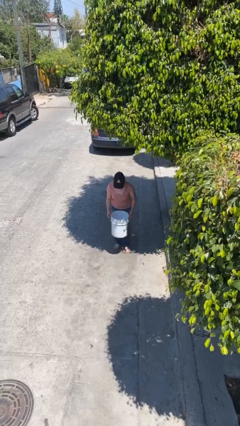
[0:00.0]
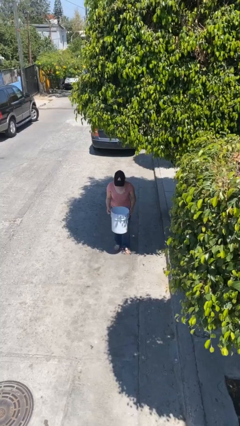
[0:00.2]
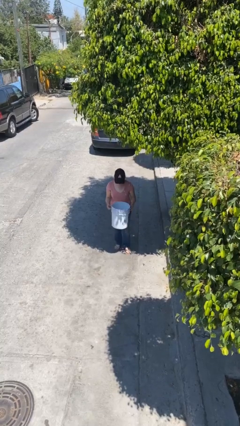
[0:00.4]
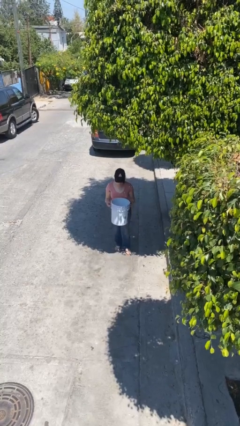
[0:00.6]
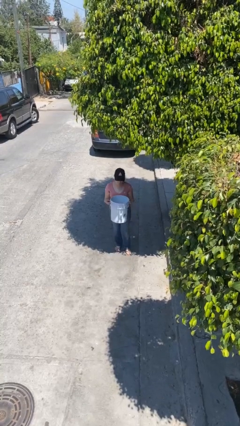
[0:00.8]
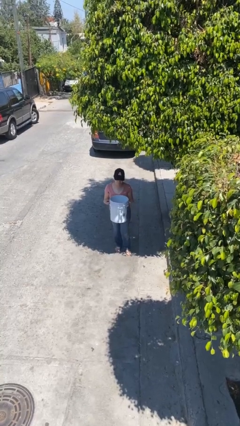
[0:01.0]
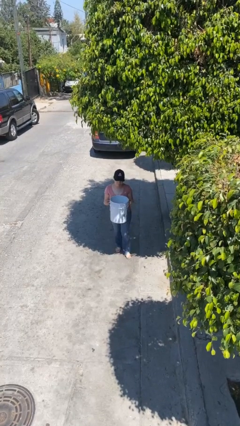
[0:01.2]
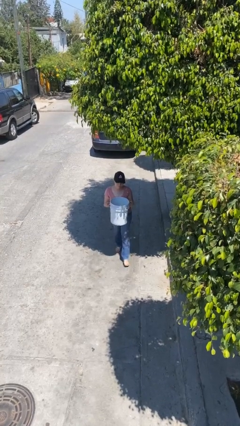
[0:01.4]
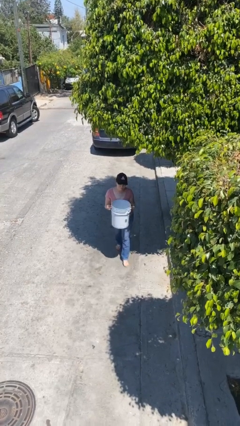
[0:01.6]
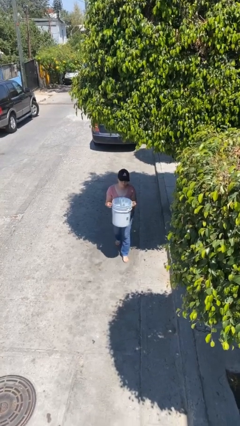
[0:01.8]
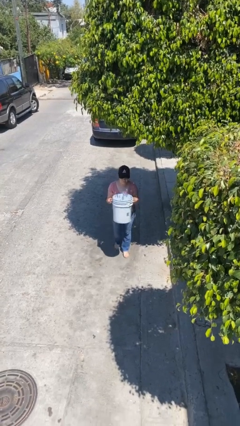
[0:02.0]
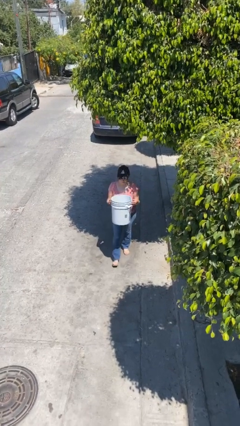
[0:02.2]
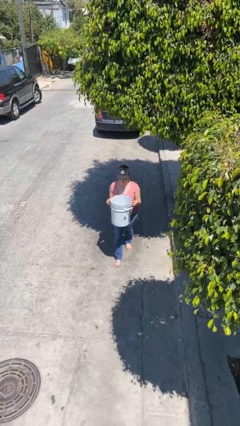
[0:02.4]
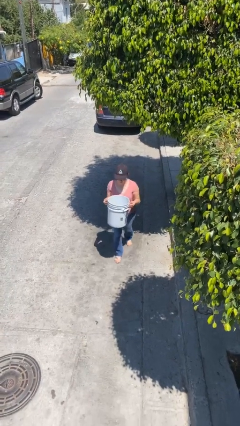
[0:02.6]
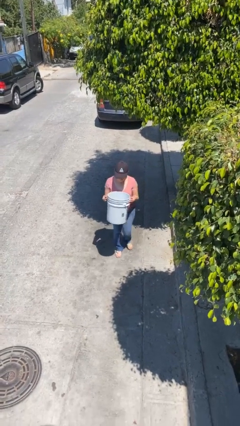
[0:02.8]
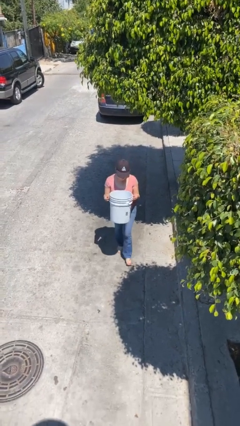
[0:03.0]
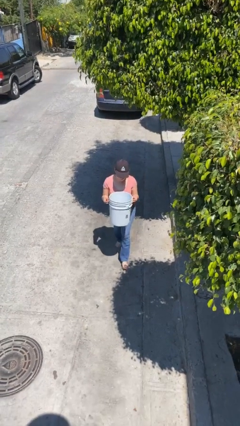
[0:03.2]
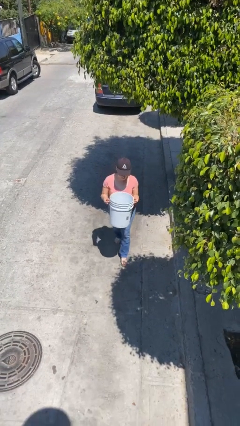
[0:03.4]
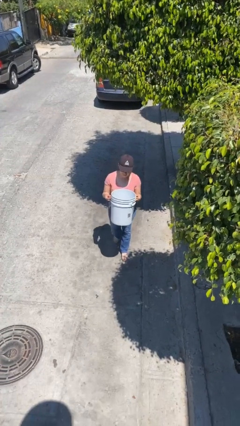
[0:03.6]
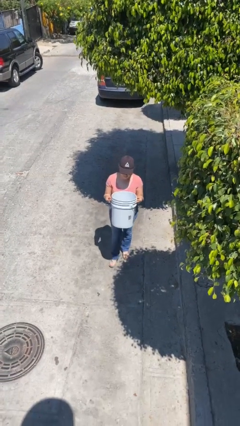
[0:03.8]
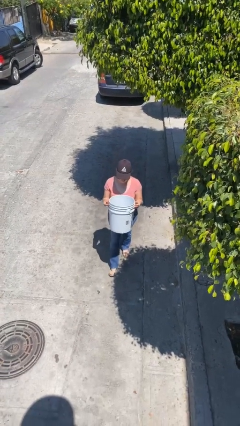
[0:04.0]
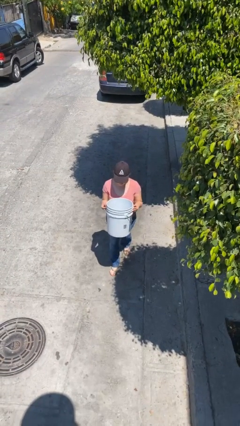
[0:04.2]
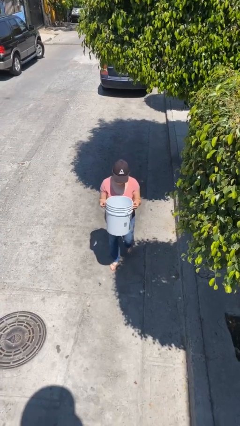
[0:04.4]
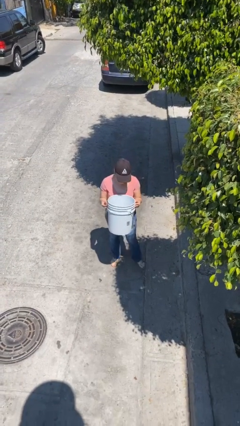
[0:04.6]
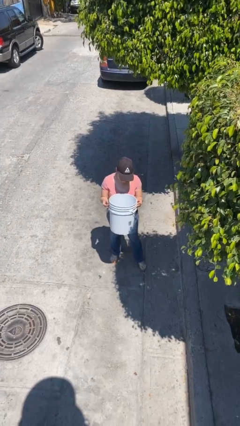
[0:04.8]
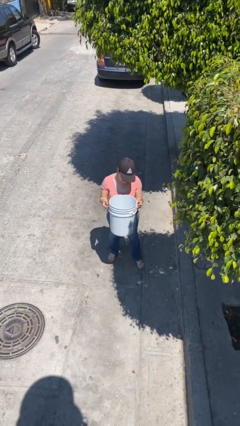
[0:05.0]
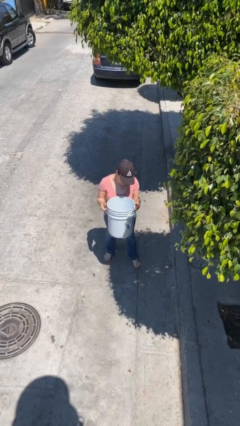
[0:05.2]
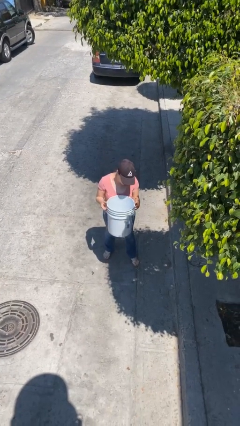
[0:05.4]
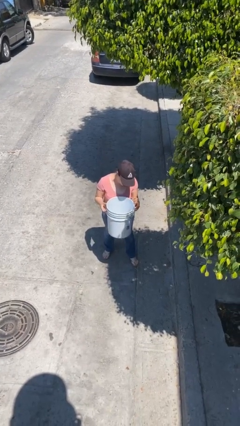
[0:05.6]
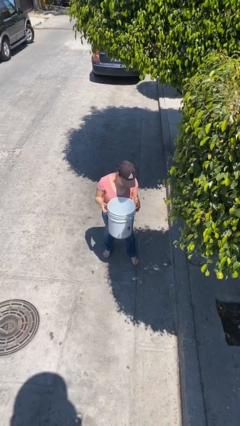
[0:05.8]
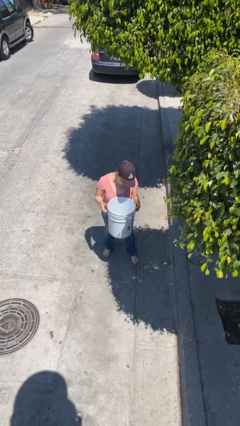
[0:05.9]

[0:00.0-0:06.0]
person carries heavy object

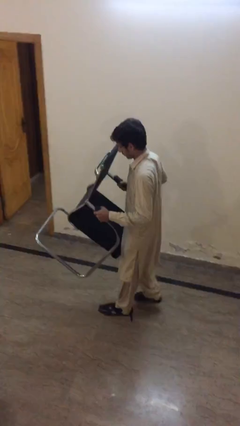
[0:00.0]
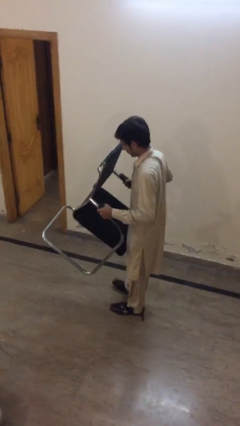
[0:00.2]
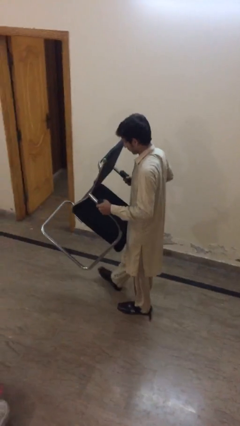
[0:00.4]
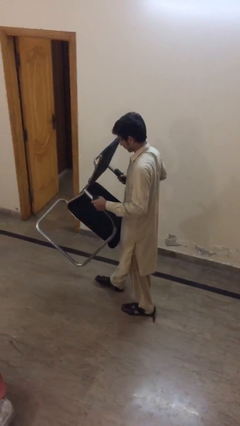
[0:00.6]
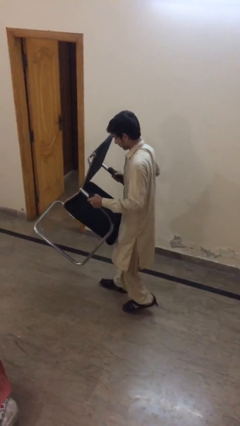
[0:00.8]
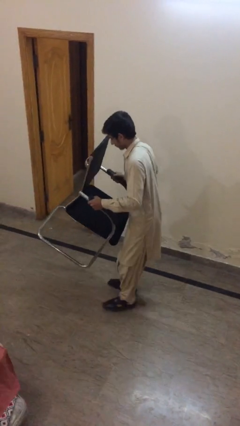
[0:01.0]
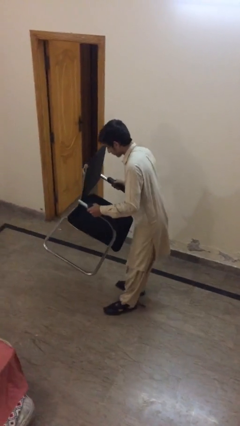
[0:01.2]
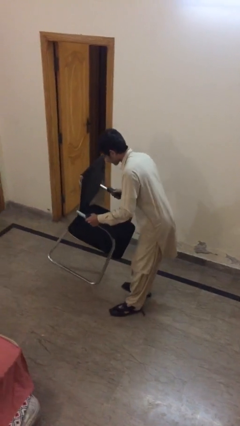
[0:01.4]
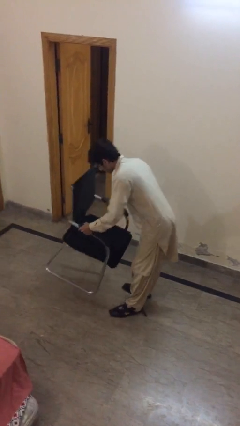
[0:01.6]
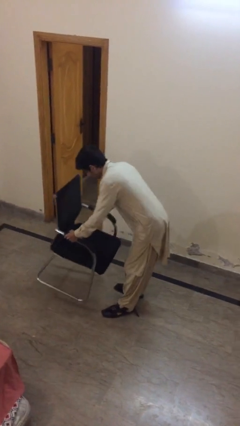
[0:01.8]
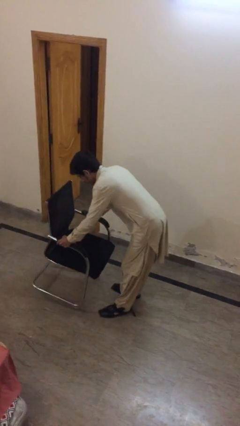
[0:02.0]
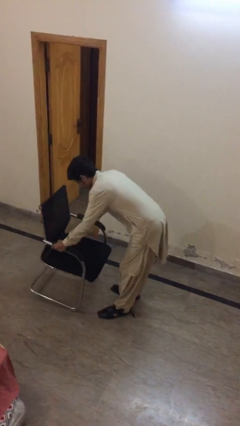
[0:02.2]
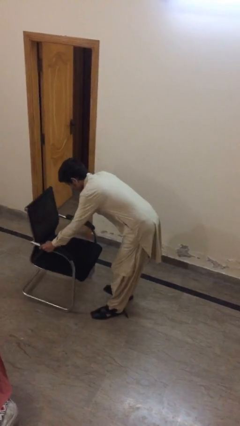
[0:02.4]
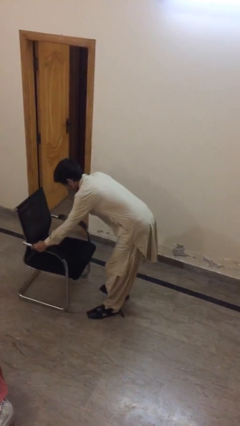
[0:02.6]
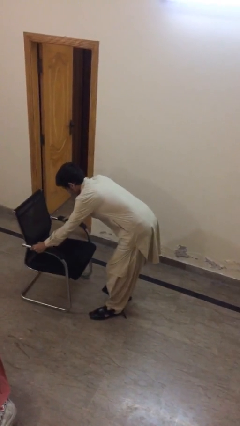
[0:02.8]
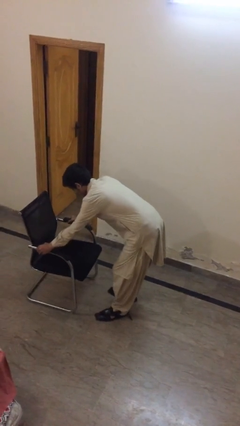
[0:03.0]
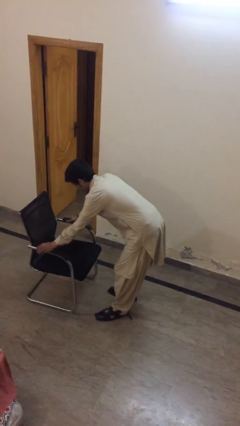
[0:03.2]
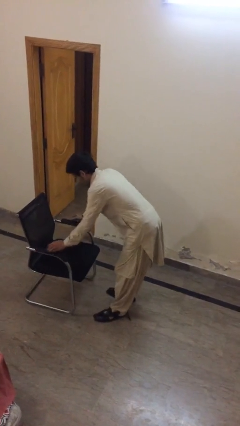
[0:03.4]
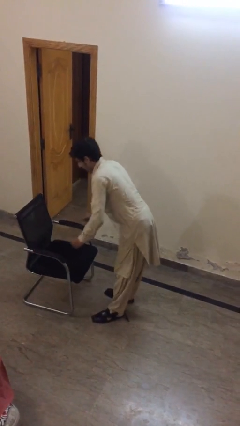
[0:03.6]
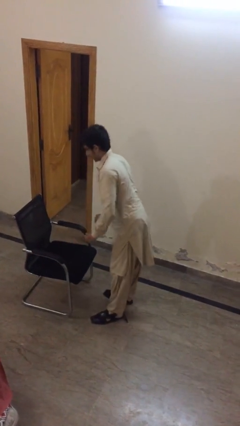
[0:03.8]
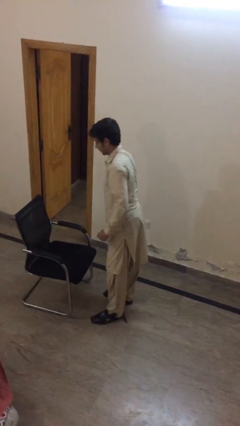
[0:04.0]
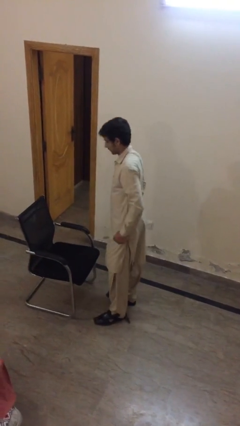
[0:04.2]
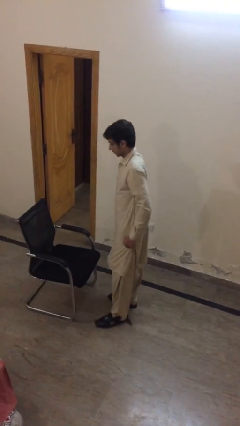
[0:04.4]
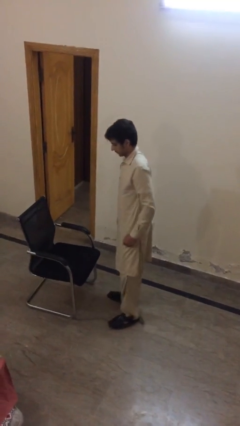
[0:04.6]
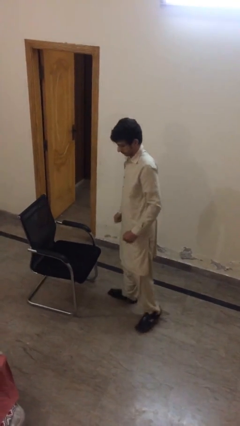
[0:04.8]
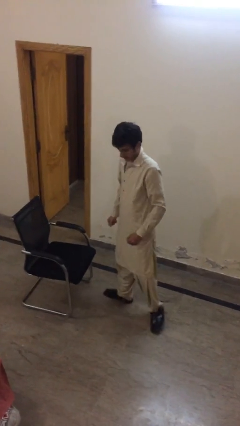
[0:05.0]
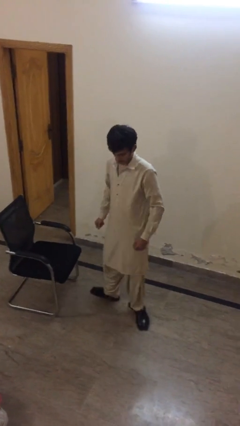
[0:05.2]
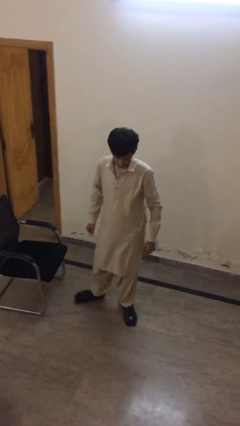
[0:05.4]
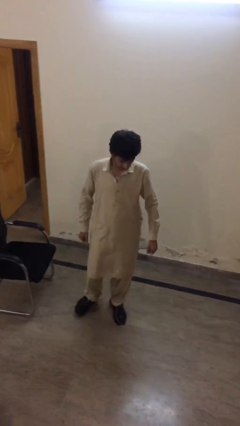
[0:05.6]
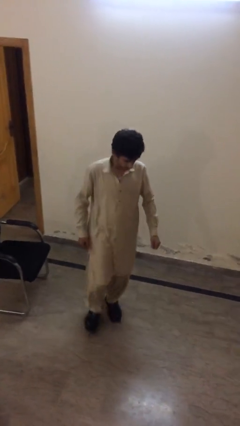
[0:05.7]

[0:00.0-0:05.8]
person puts down object on floor

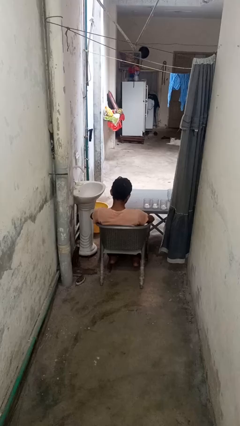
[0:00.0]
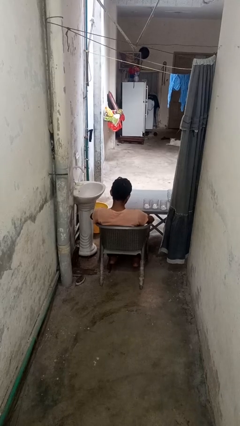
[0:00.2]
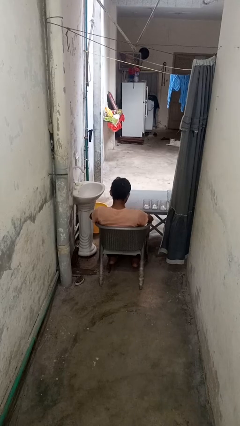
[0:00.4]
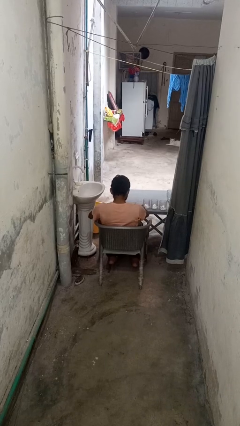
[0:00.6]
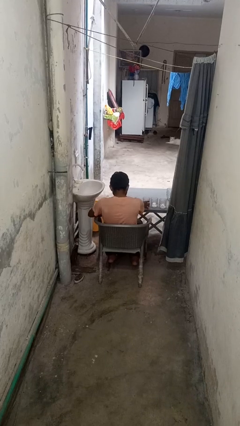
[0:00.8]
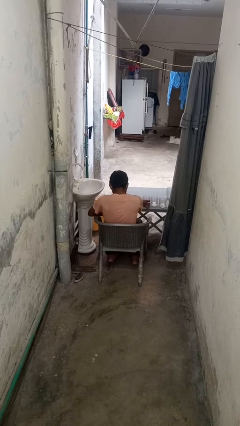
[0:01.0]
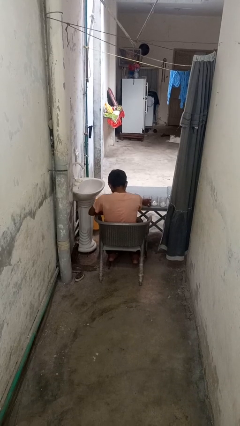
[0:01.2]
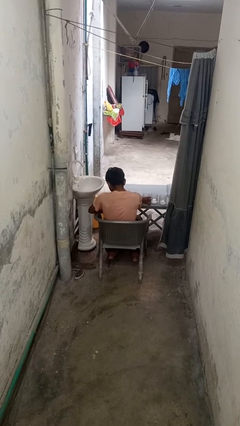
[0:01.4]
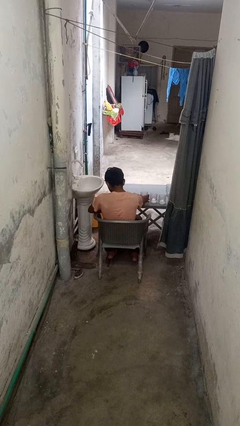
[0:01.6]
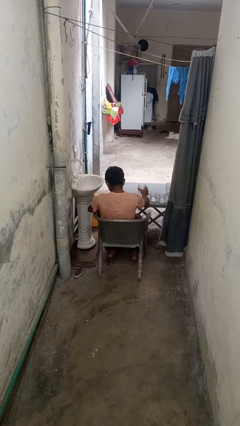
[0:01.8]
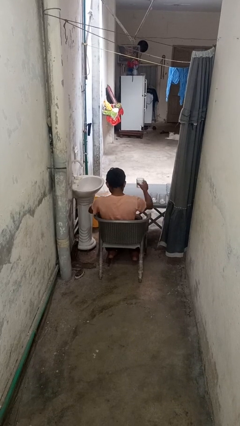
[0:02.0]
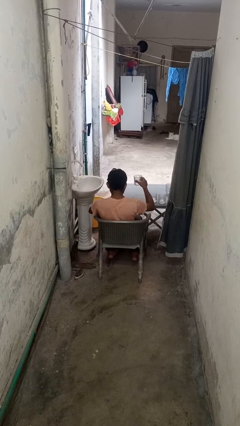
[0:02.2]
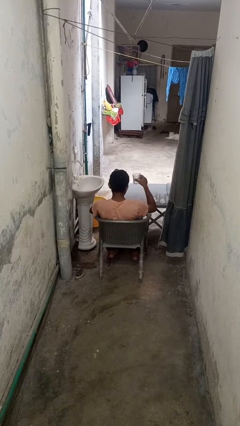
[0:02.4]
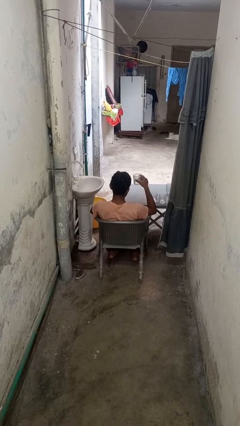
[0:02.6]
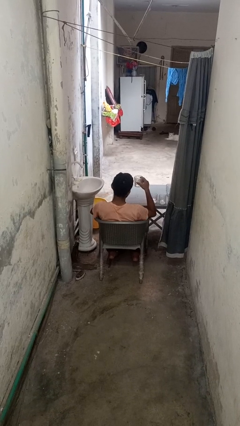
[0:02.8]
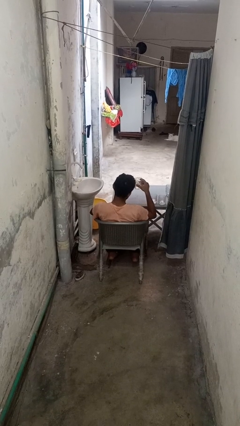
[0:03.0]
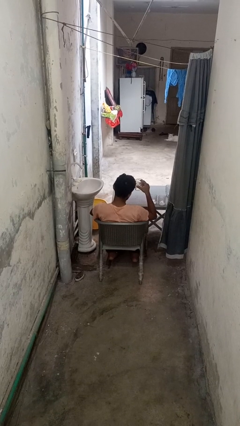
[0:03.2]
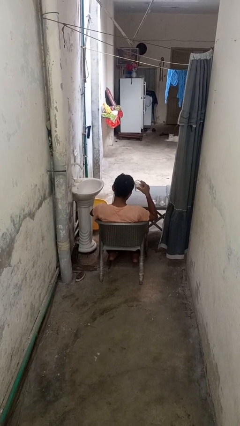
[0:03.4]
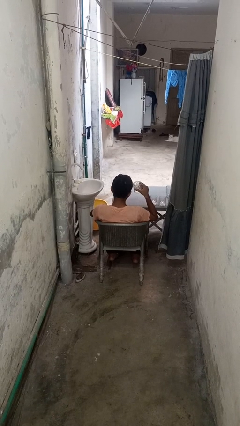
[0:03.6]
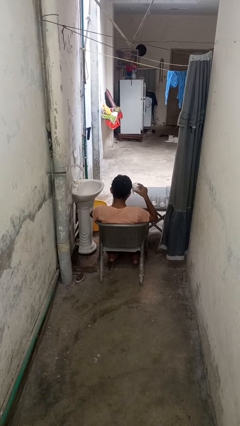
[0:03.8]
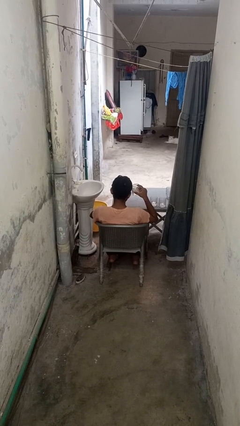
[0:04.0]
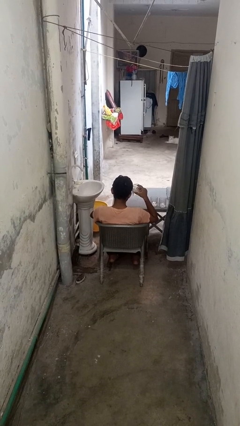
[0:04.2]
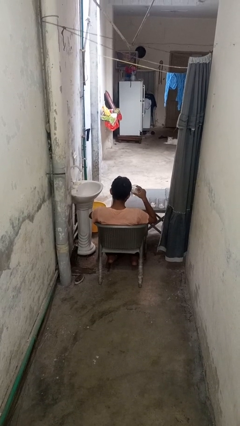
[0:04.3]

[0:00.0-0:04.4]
person picks up object from table

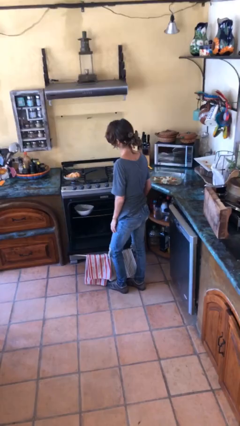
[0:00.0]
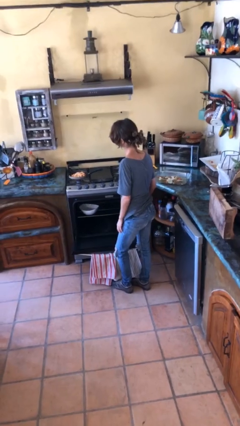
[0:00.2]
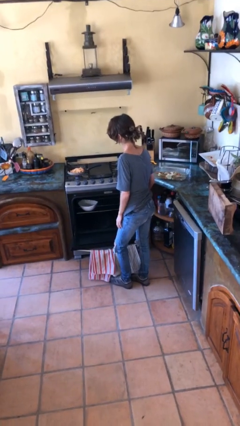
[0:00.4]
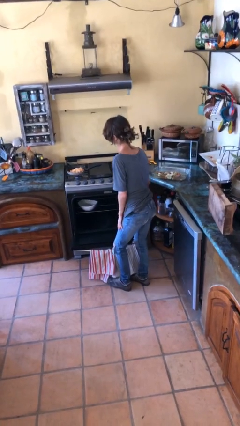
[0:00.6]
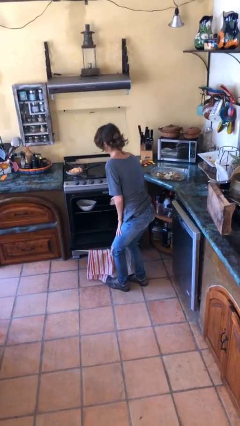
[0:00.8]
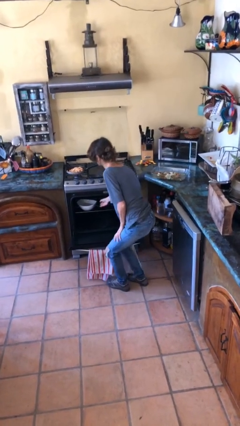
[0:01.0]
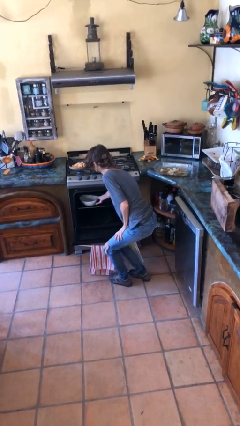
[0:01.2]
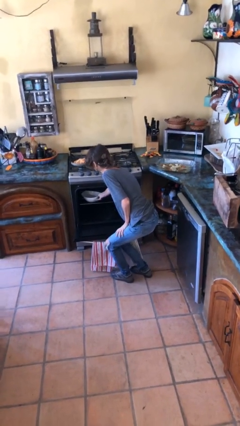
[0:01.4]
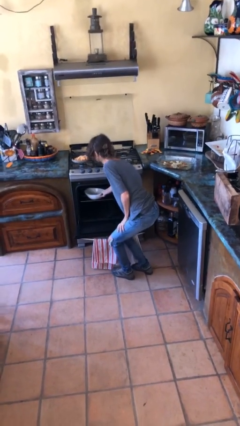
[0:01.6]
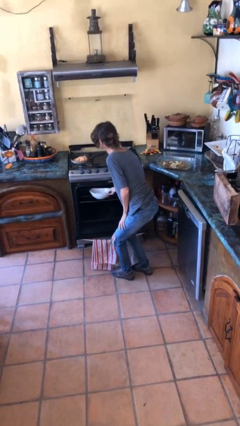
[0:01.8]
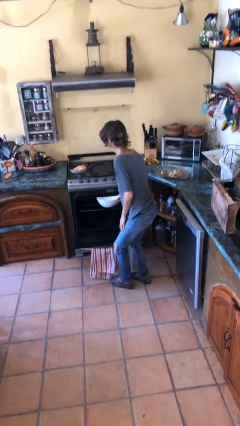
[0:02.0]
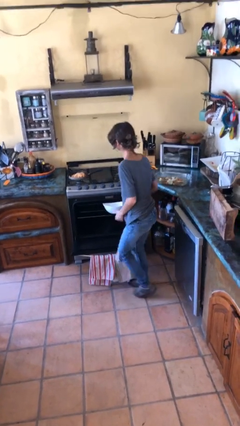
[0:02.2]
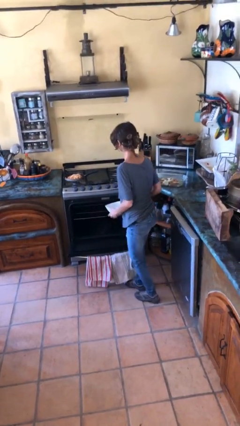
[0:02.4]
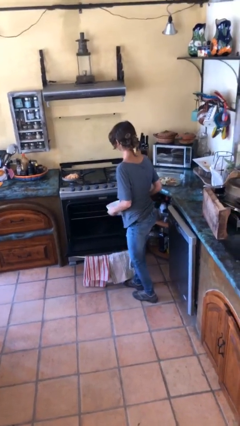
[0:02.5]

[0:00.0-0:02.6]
person takes object from oven
